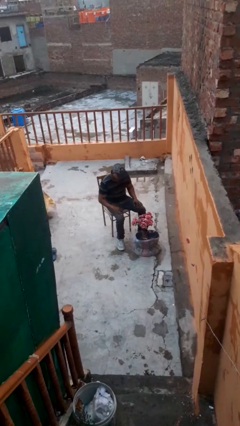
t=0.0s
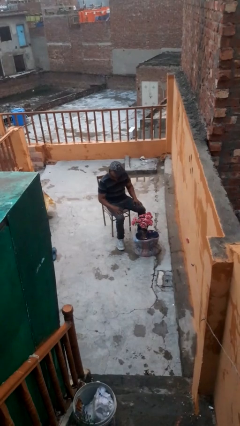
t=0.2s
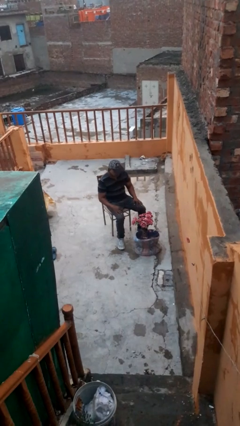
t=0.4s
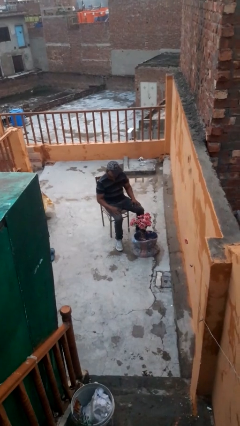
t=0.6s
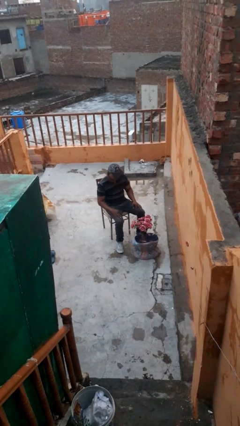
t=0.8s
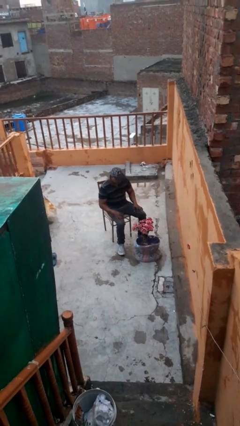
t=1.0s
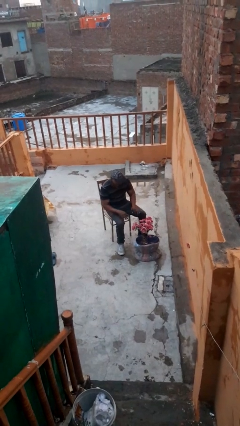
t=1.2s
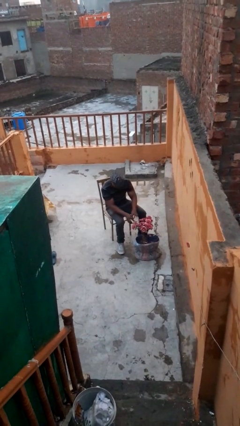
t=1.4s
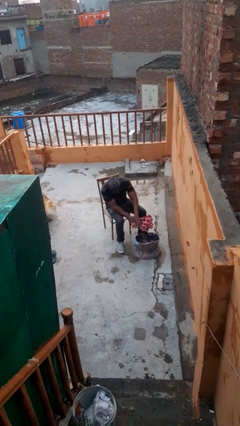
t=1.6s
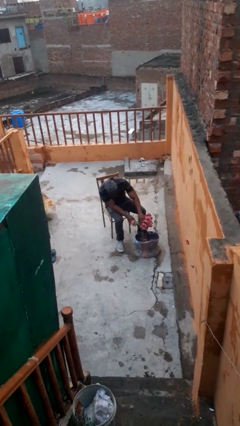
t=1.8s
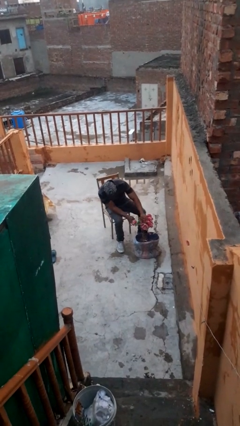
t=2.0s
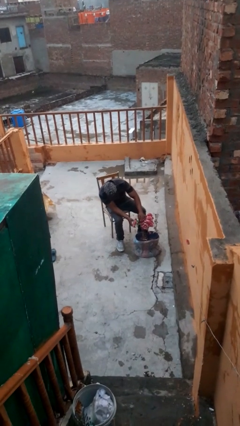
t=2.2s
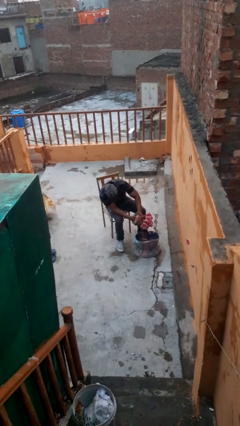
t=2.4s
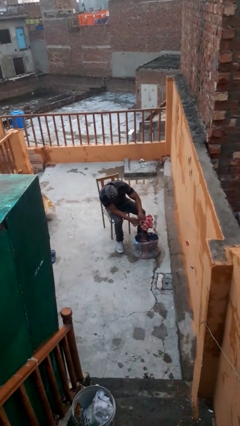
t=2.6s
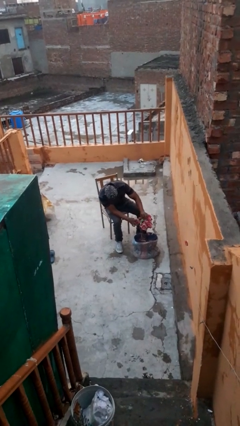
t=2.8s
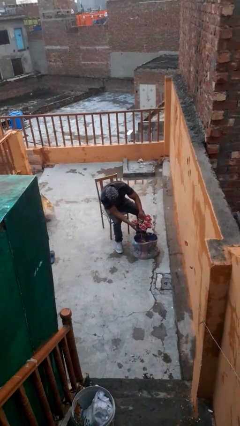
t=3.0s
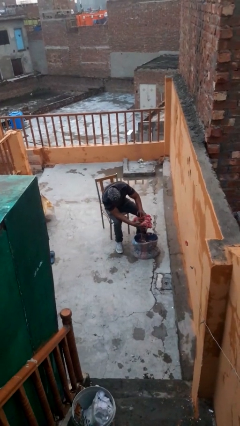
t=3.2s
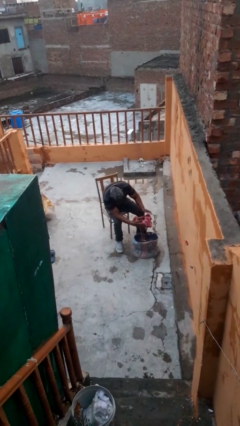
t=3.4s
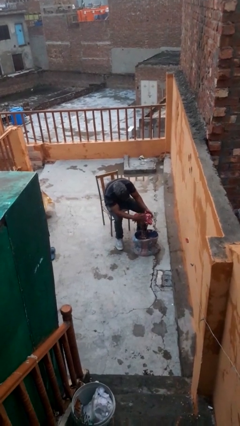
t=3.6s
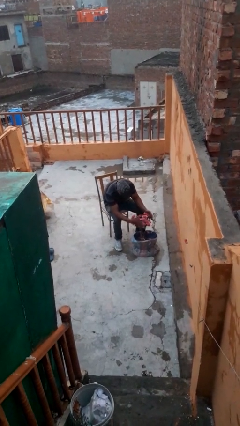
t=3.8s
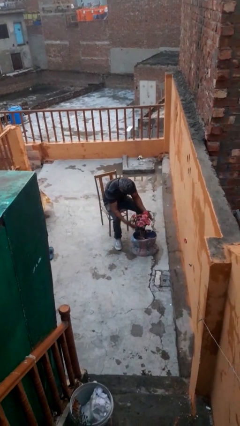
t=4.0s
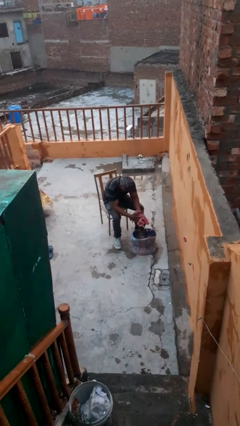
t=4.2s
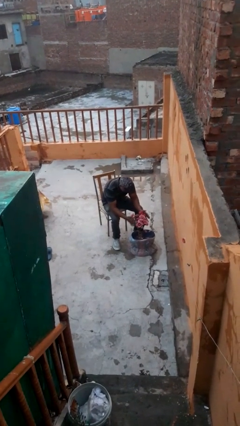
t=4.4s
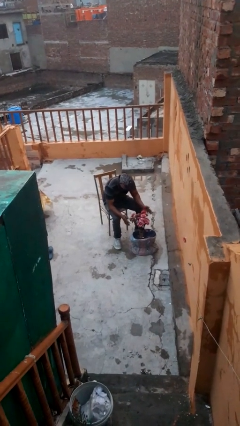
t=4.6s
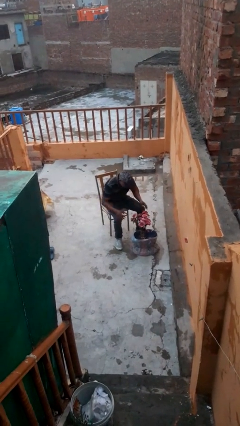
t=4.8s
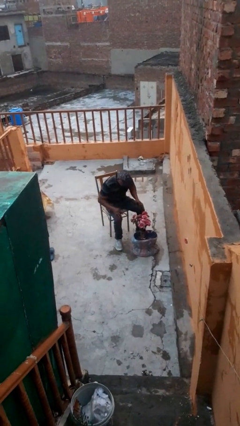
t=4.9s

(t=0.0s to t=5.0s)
person arranges flowers in vase

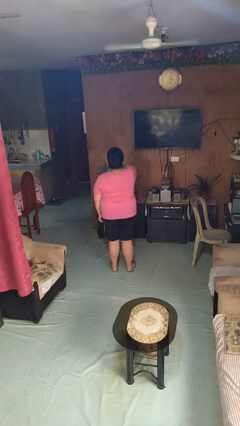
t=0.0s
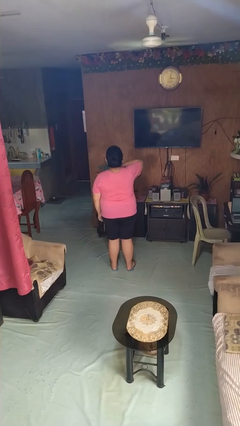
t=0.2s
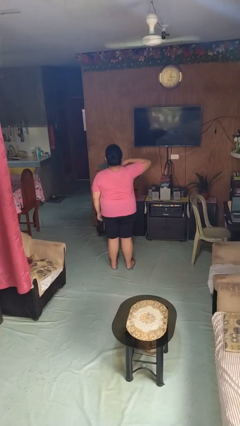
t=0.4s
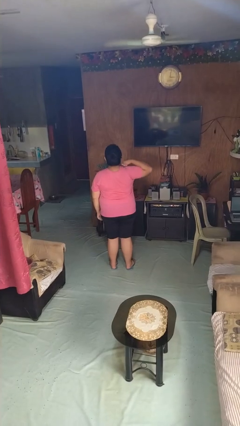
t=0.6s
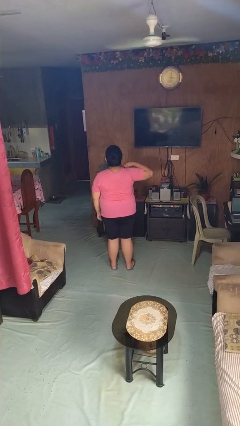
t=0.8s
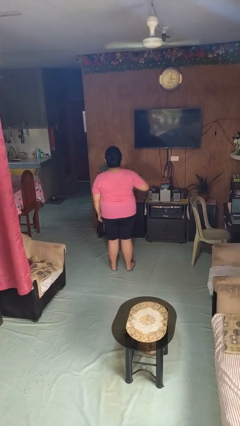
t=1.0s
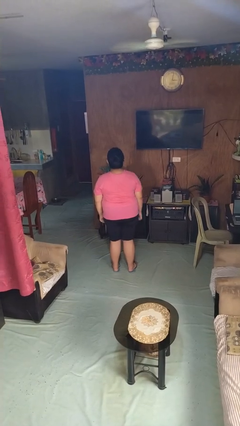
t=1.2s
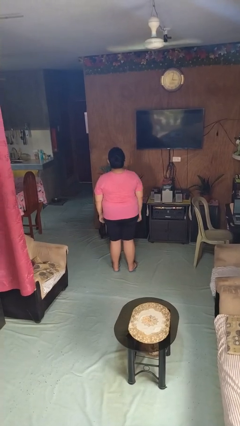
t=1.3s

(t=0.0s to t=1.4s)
person gestures cut

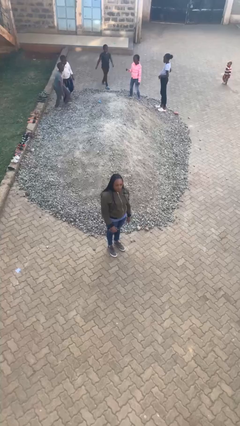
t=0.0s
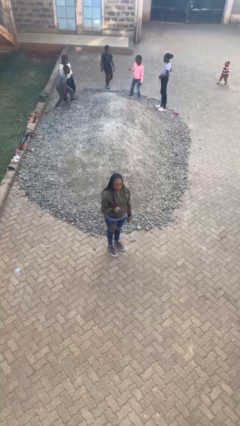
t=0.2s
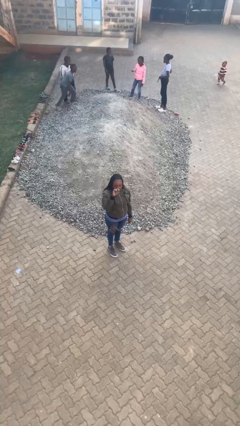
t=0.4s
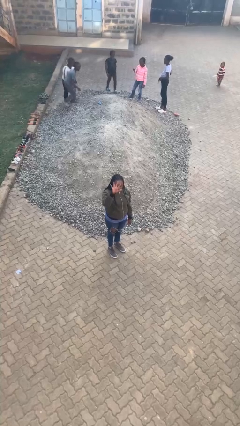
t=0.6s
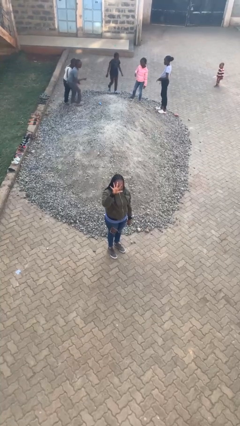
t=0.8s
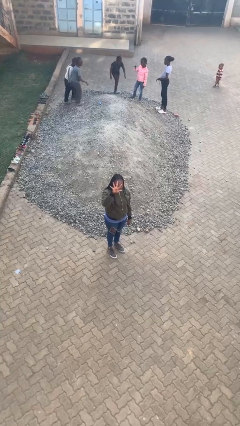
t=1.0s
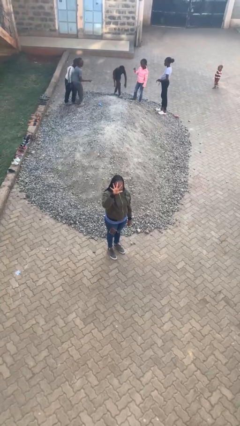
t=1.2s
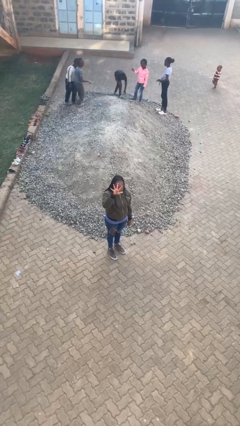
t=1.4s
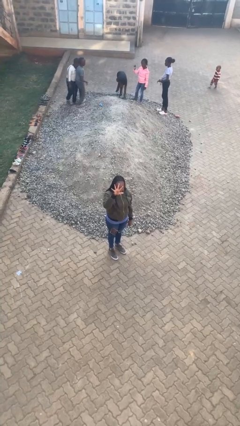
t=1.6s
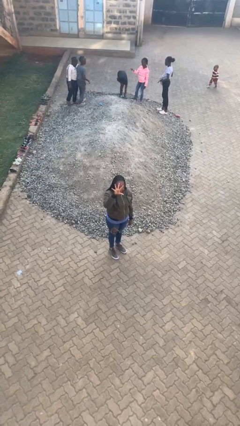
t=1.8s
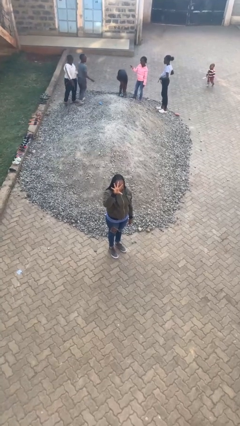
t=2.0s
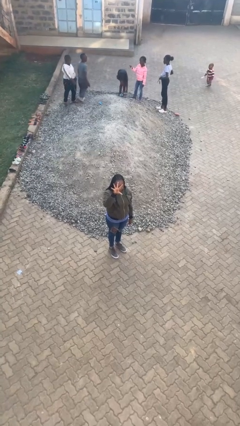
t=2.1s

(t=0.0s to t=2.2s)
person gestures number five

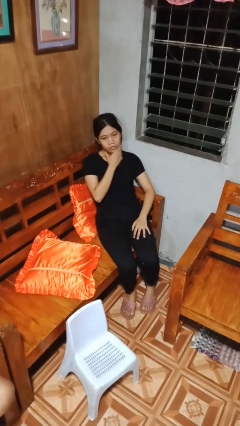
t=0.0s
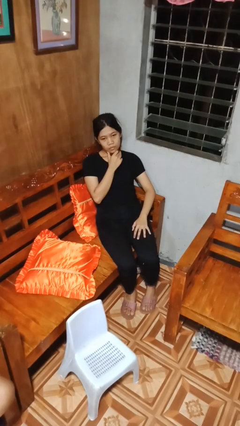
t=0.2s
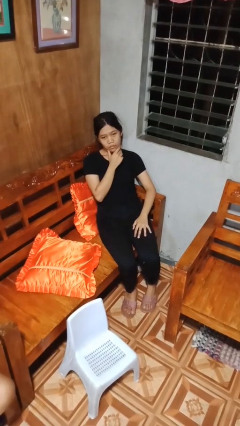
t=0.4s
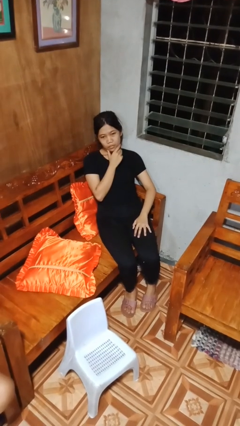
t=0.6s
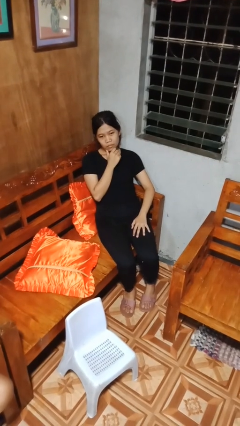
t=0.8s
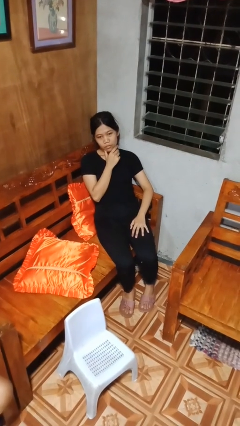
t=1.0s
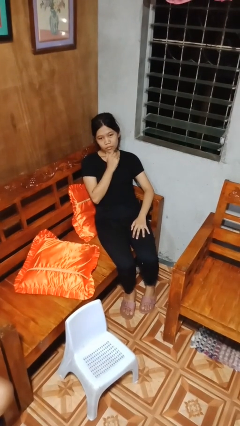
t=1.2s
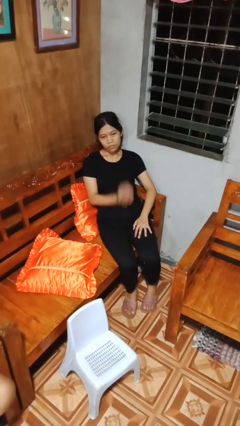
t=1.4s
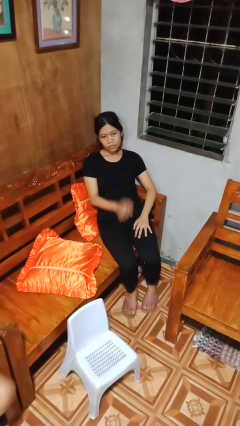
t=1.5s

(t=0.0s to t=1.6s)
person strokes chin

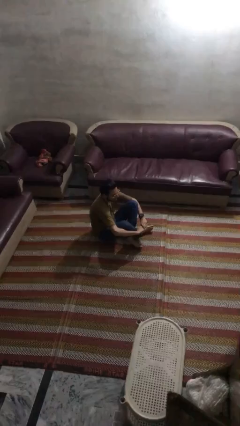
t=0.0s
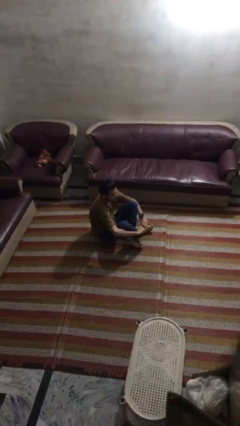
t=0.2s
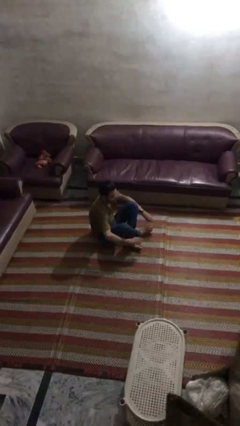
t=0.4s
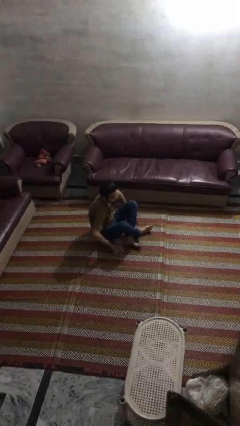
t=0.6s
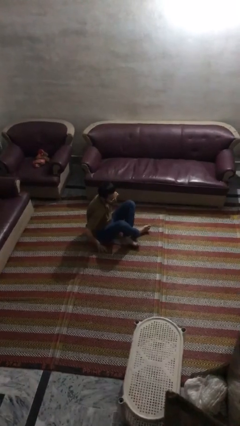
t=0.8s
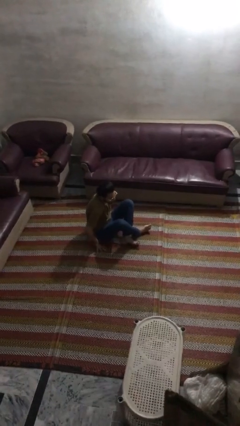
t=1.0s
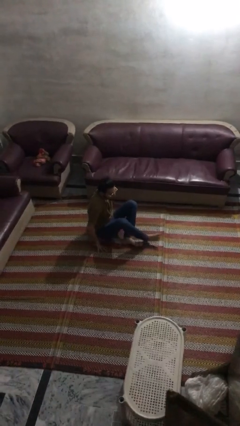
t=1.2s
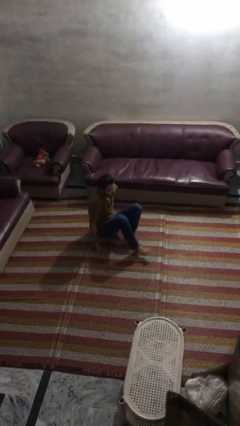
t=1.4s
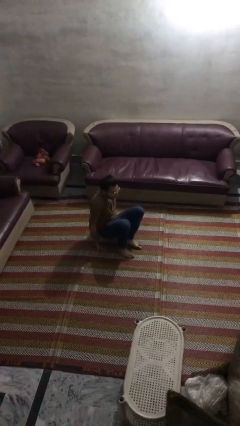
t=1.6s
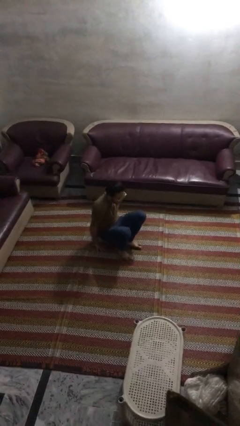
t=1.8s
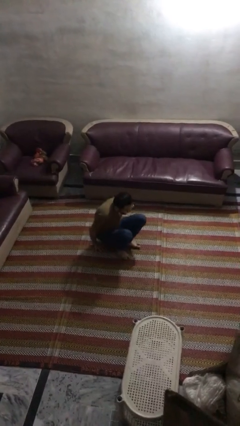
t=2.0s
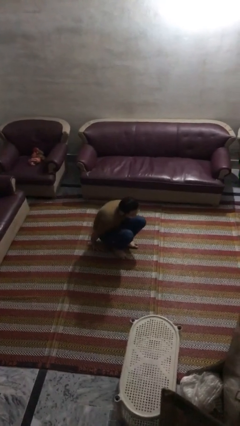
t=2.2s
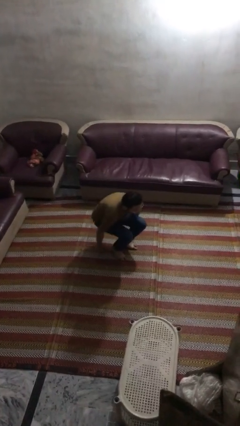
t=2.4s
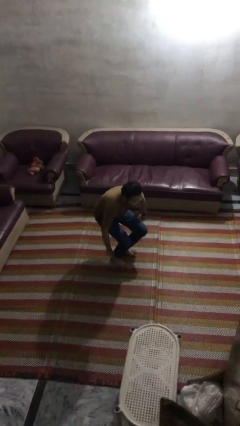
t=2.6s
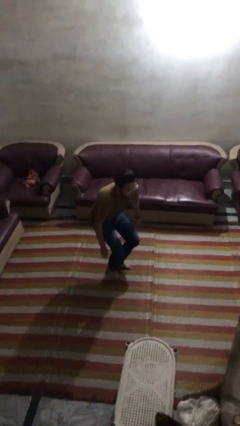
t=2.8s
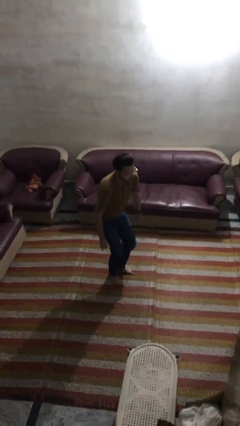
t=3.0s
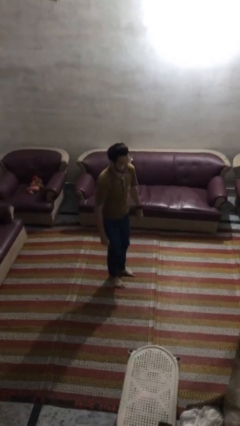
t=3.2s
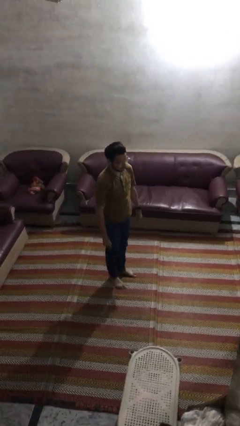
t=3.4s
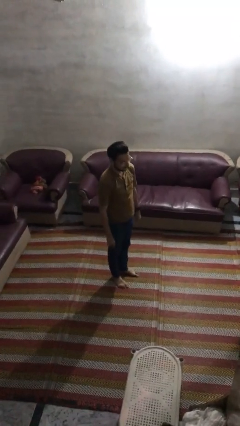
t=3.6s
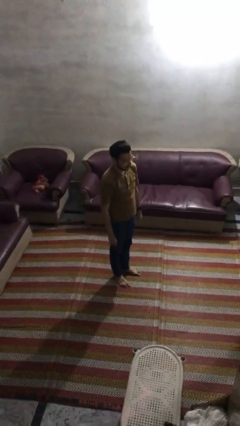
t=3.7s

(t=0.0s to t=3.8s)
person stands up from floor

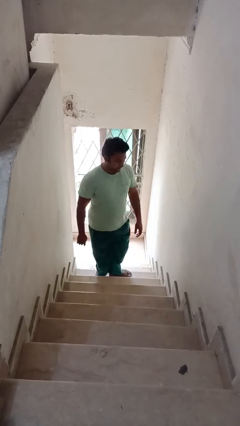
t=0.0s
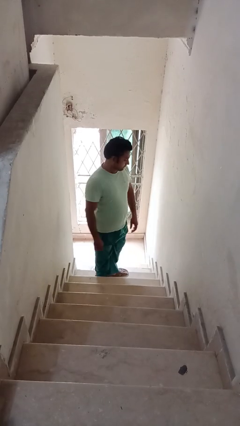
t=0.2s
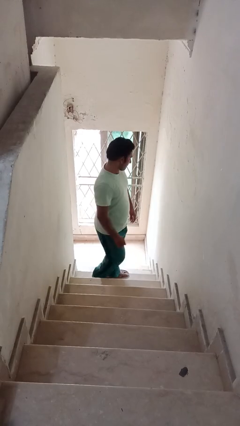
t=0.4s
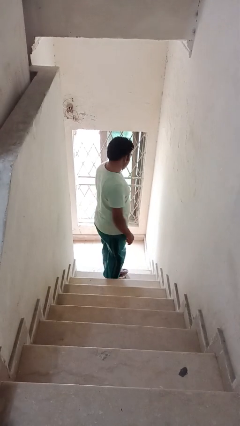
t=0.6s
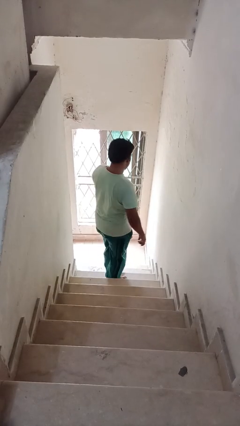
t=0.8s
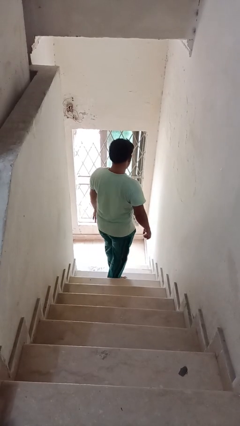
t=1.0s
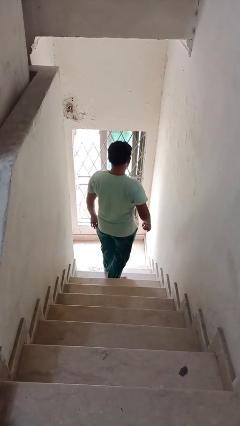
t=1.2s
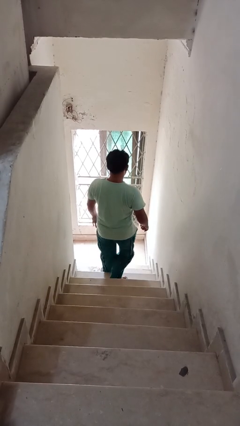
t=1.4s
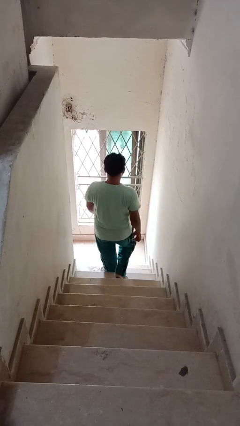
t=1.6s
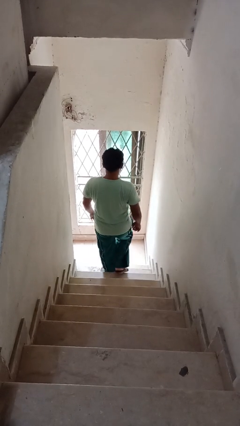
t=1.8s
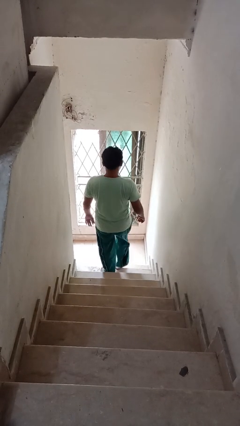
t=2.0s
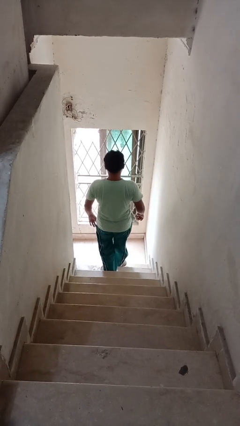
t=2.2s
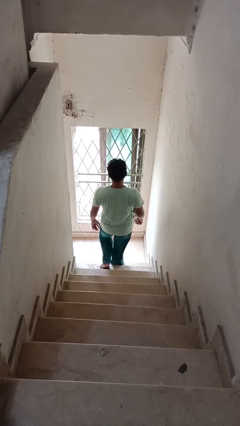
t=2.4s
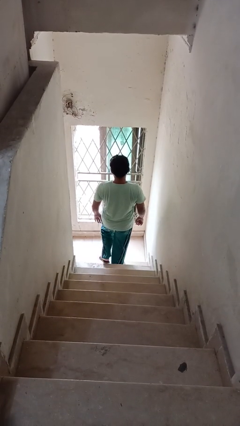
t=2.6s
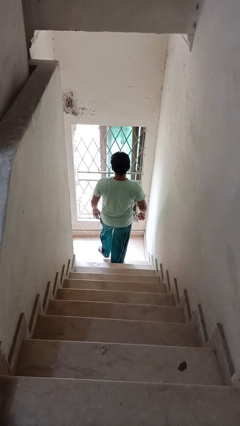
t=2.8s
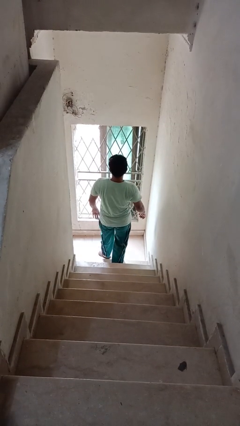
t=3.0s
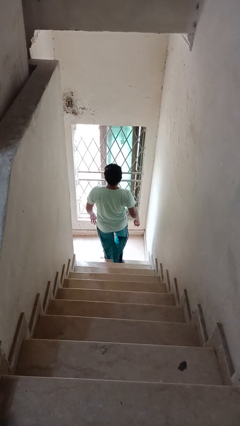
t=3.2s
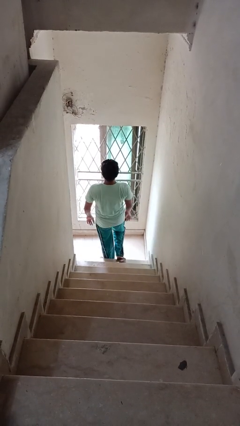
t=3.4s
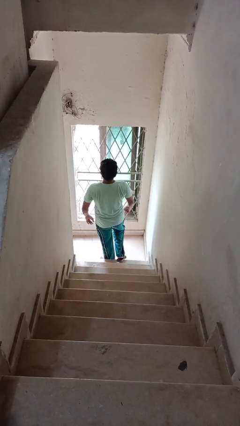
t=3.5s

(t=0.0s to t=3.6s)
person climbs down stairs
